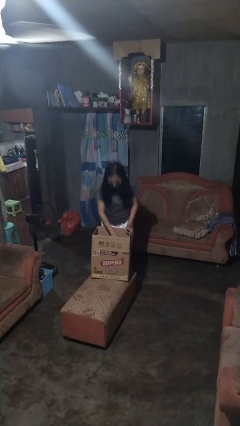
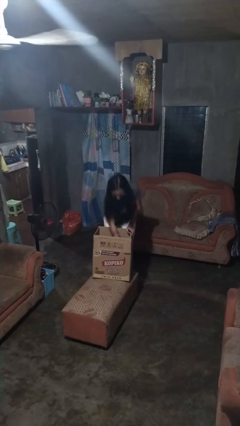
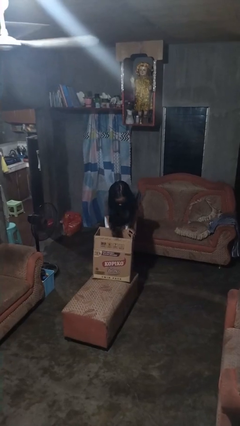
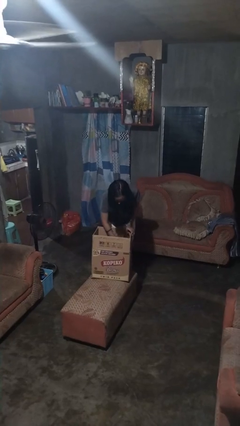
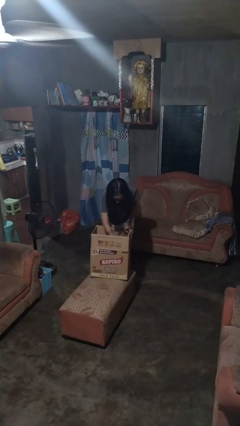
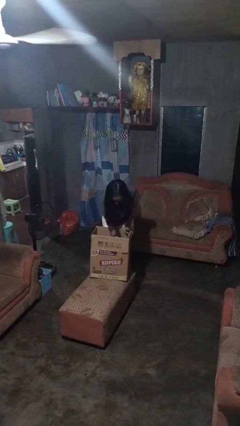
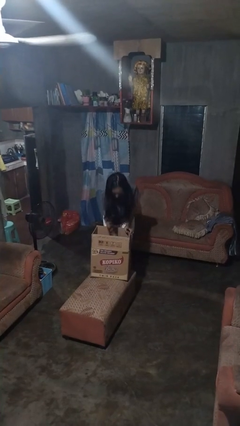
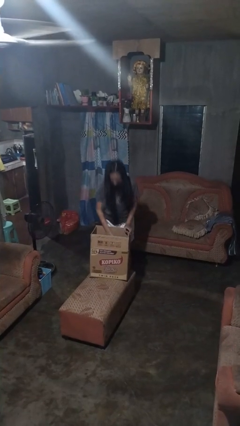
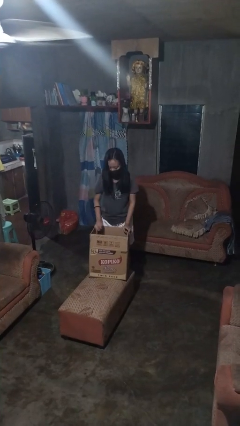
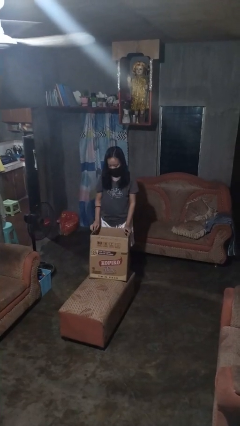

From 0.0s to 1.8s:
person searches in box

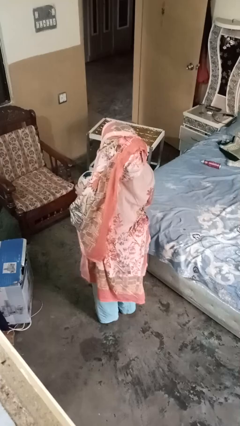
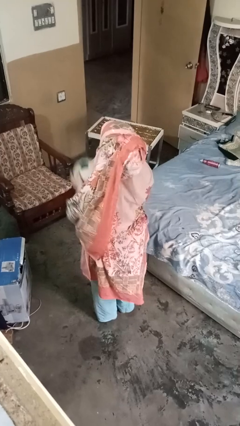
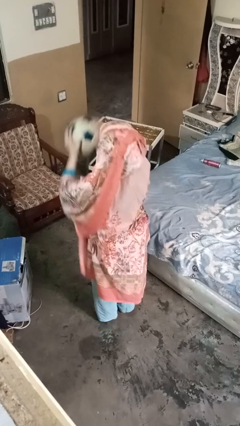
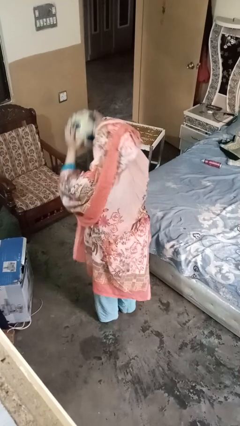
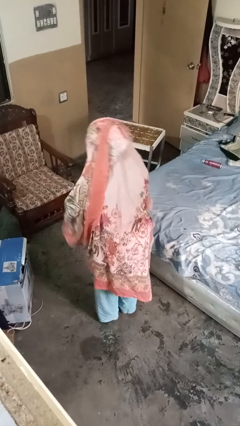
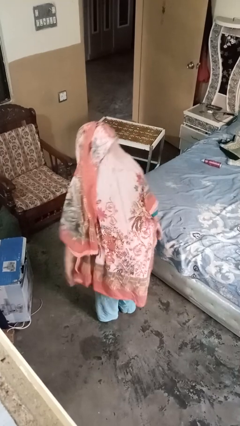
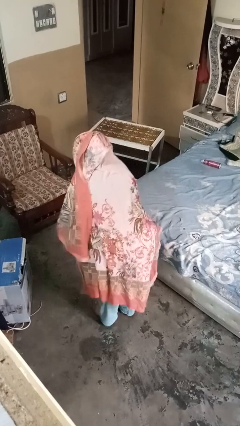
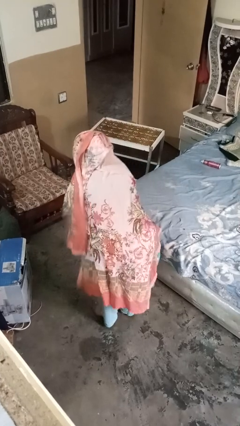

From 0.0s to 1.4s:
person bounces ball on floor

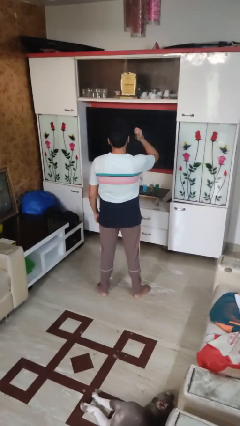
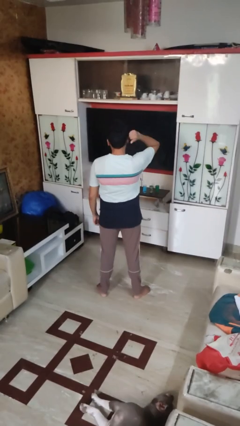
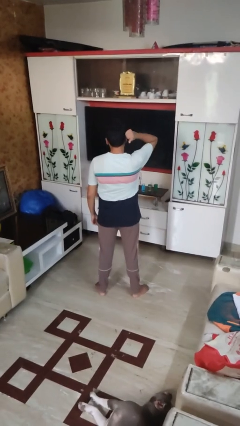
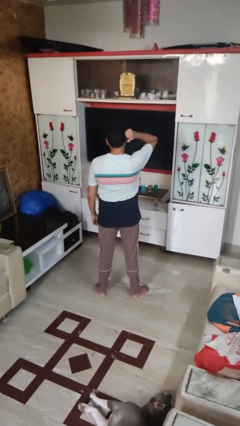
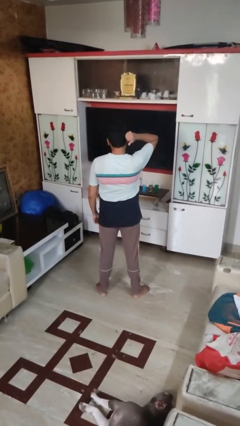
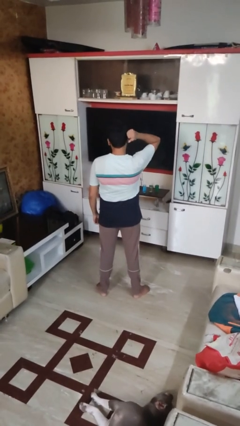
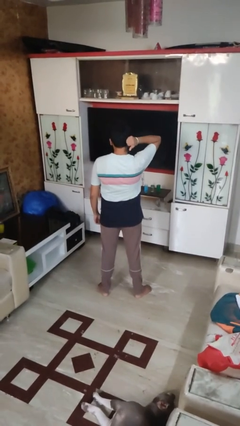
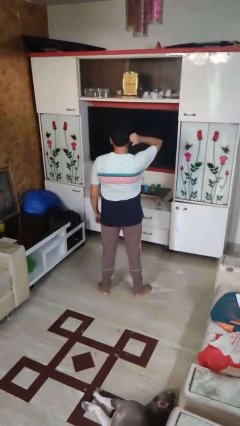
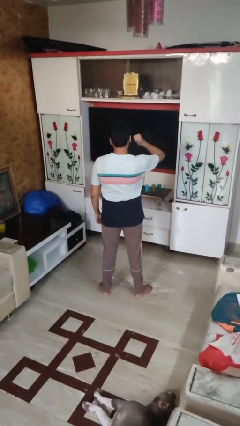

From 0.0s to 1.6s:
person gestures behind me

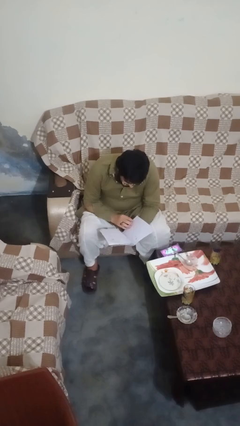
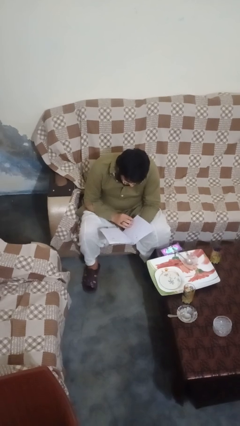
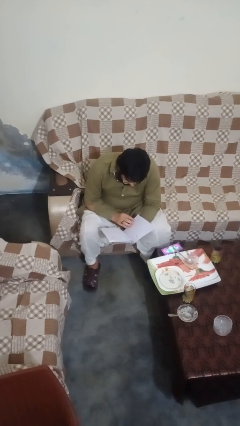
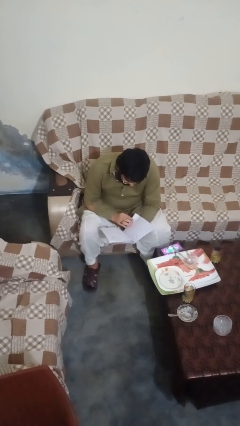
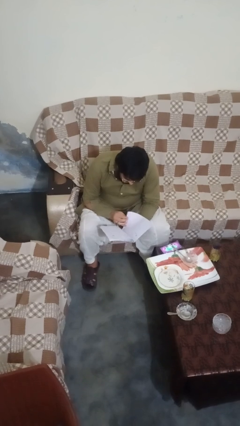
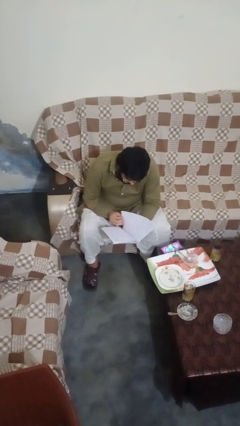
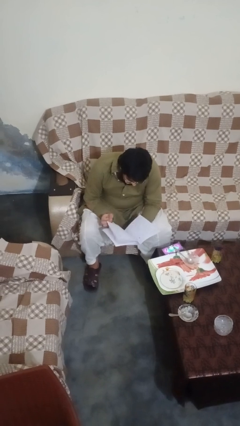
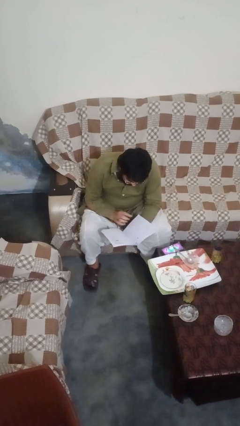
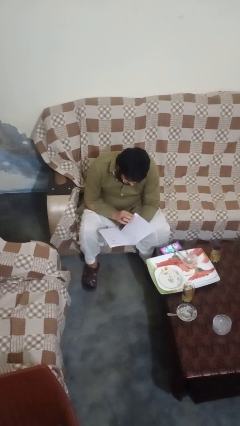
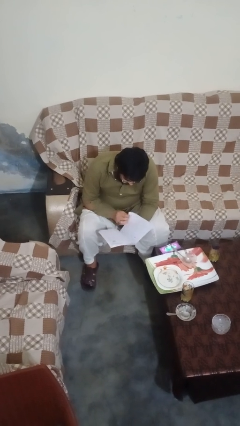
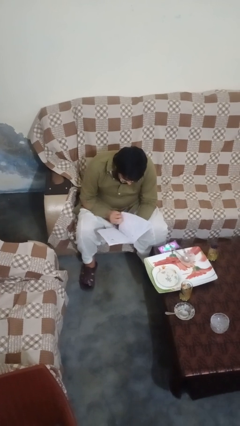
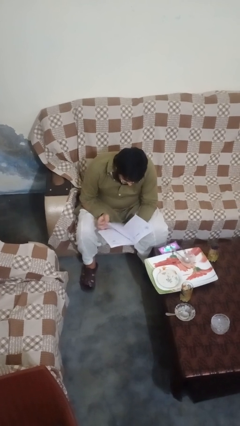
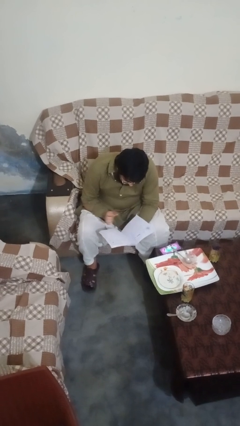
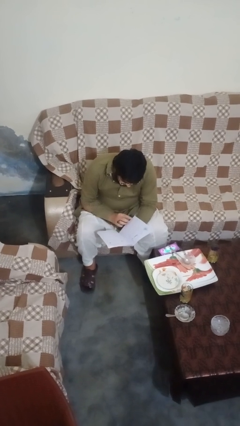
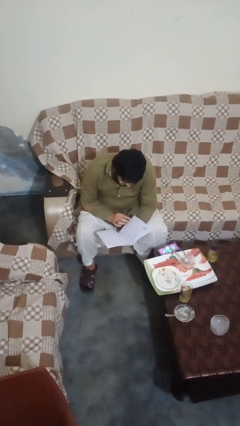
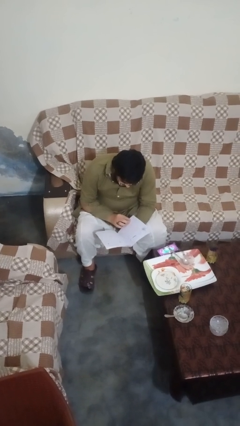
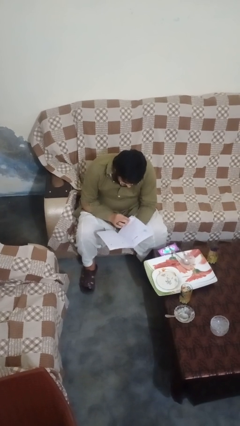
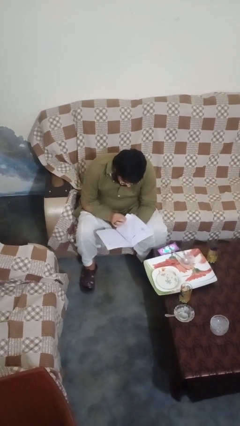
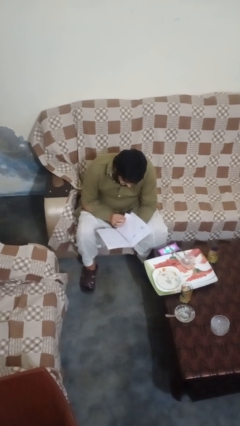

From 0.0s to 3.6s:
person reads book

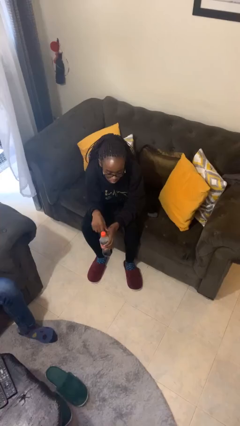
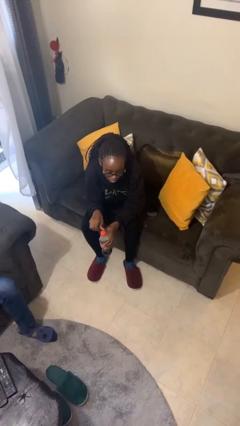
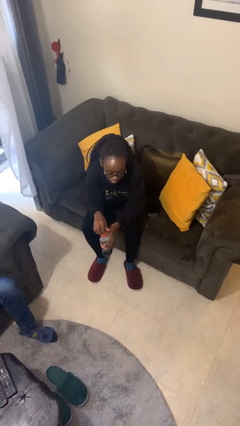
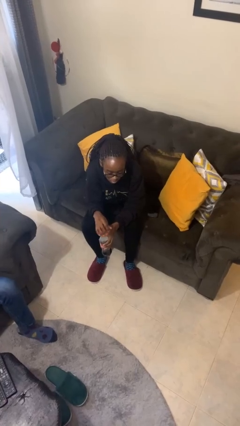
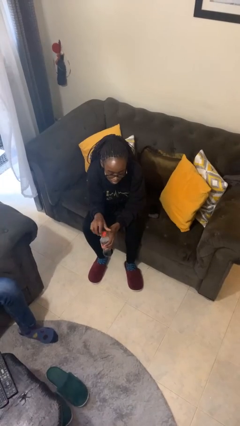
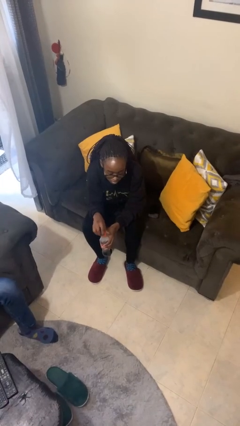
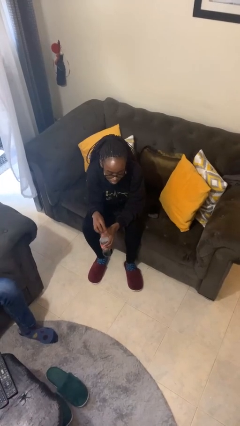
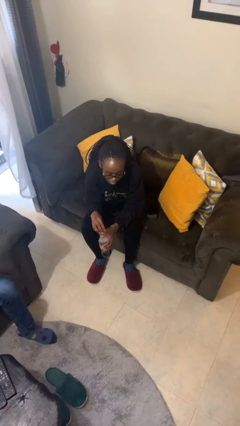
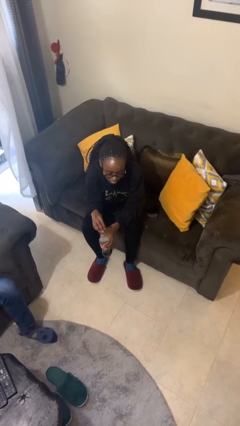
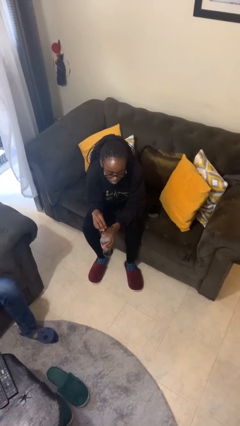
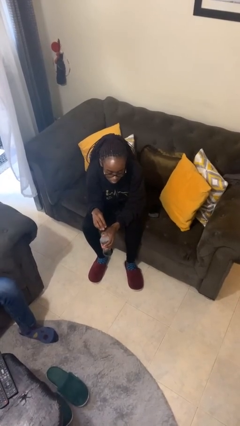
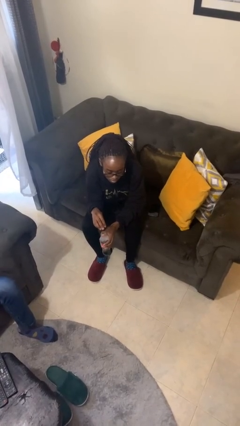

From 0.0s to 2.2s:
person unscrews lid from bottle

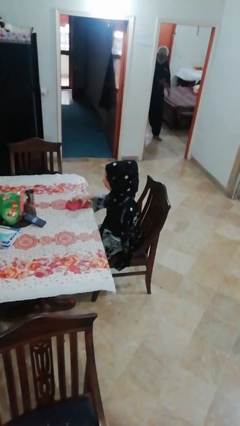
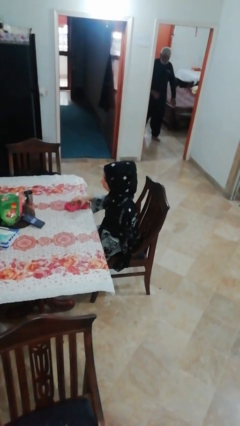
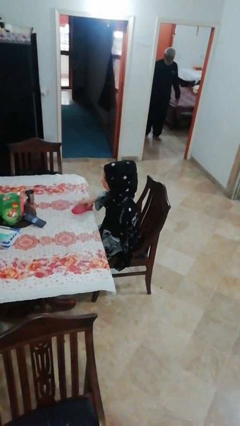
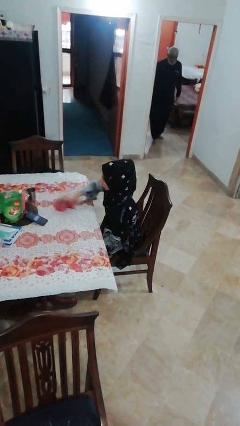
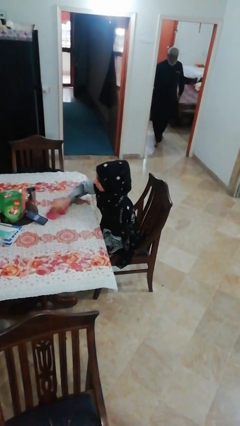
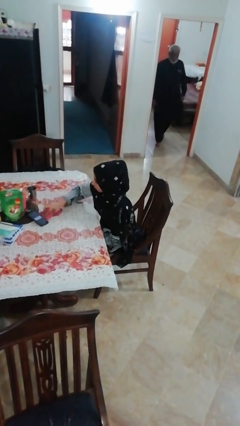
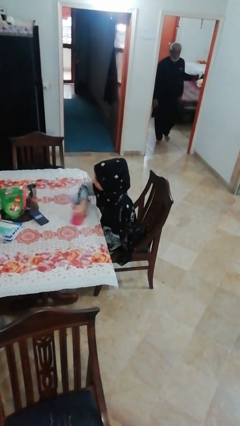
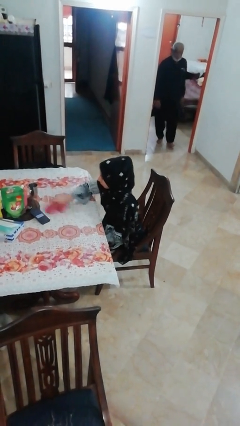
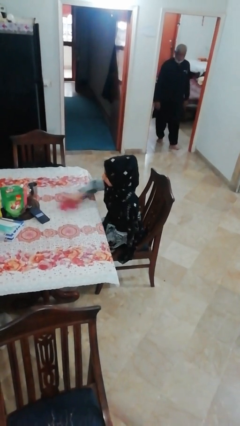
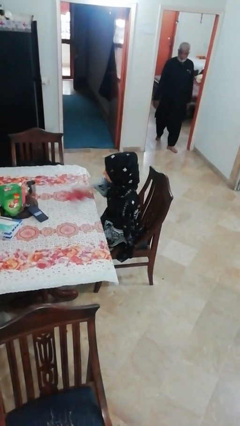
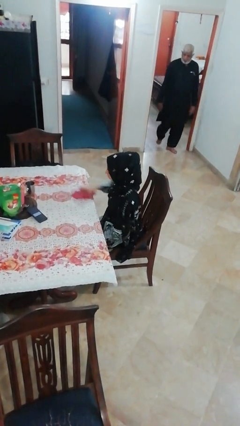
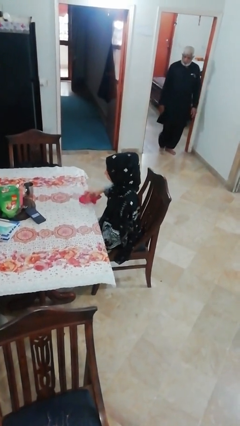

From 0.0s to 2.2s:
person cleans table with rag

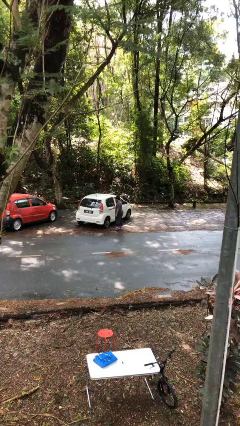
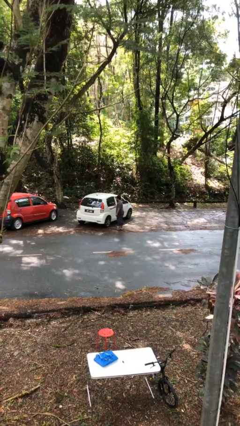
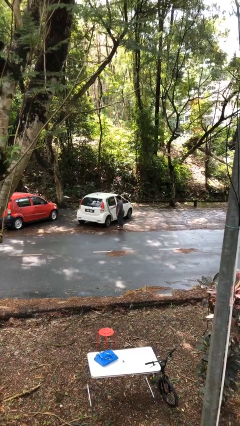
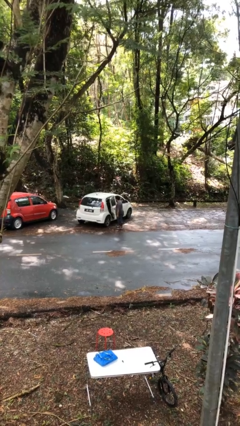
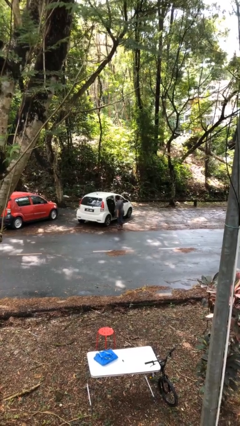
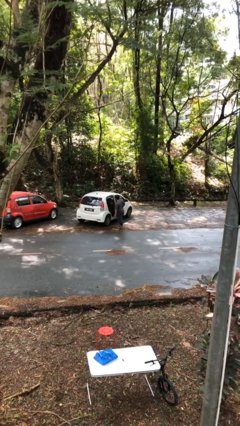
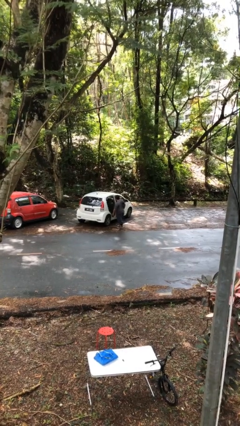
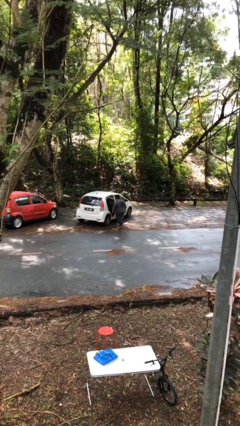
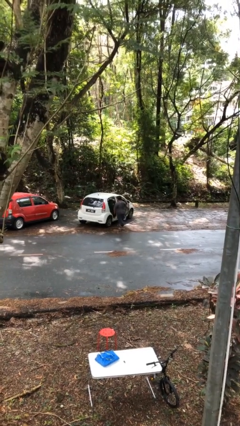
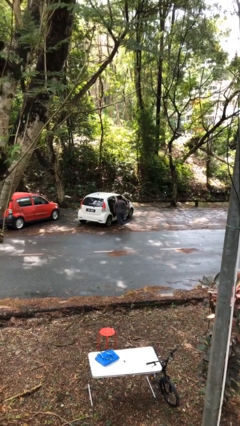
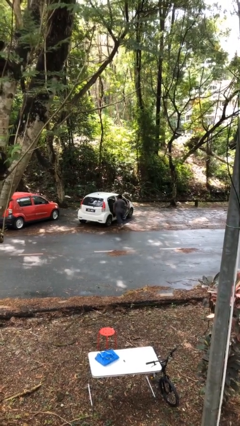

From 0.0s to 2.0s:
person opens car door

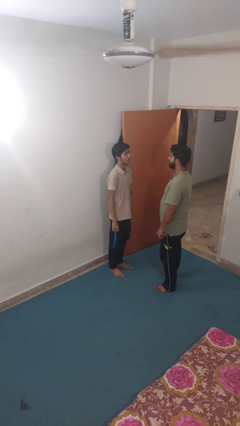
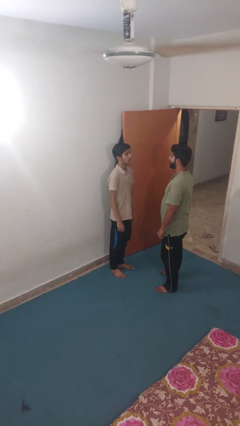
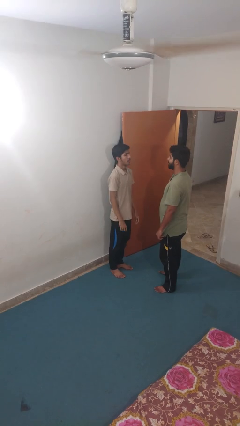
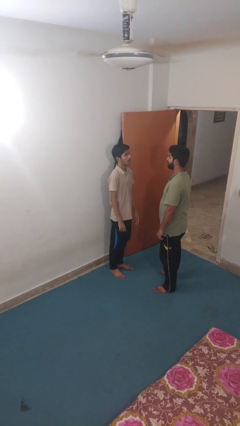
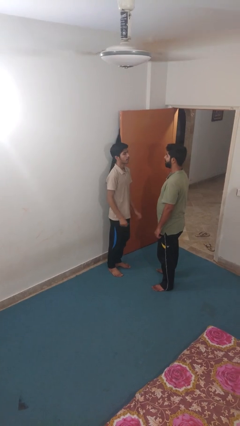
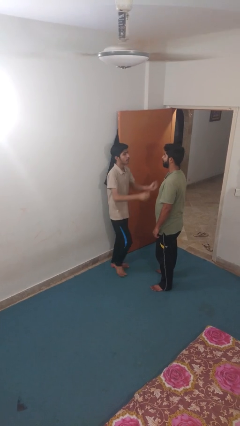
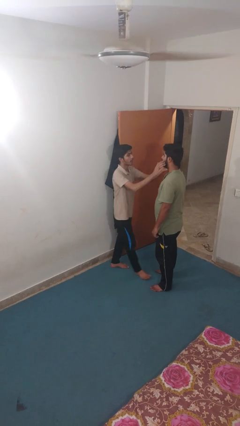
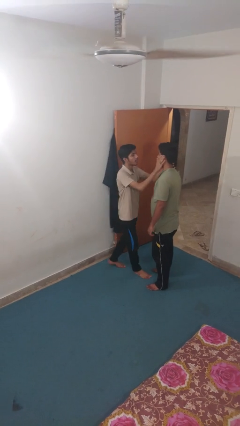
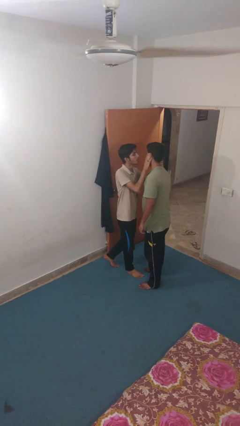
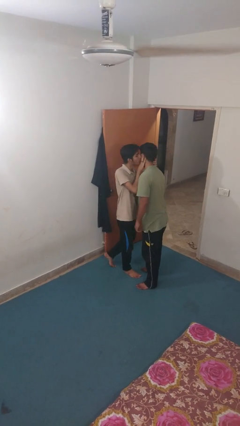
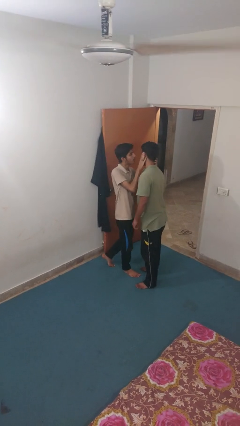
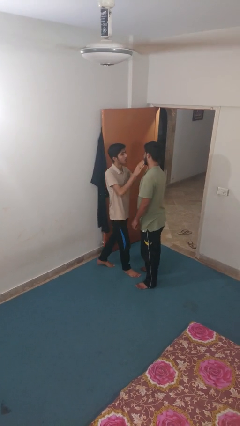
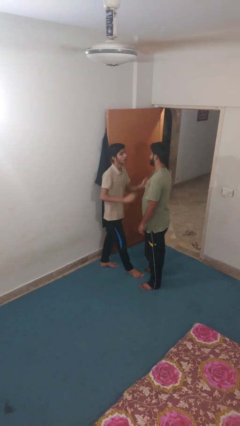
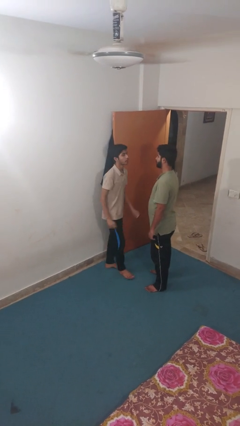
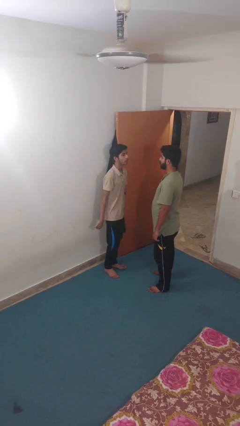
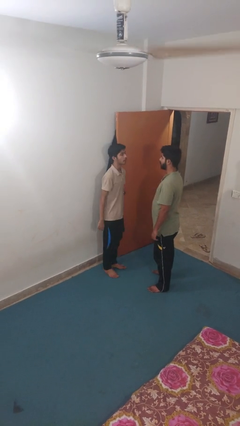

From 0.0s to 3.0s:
person kisses cheek of person
